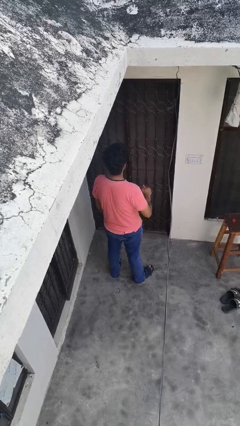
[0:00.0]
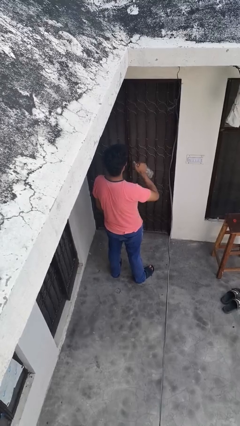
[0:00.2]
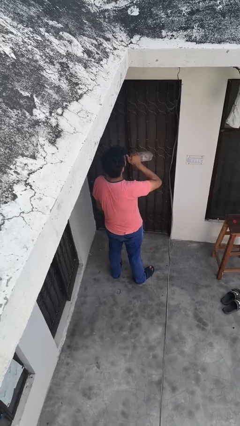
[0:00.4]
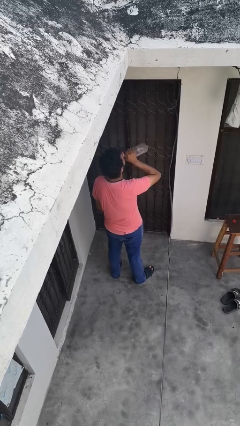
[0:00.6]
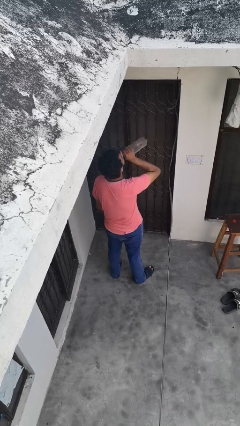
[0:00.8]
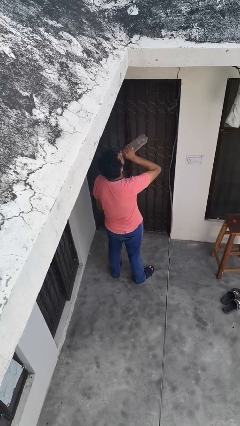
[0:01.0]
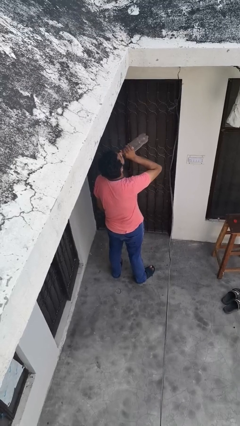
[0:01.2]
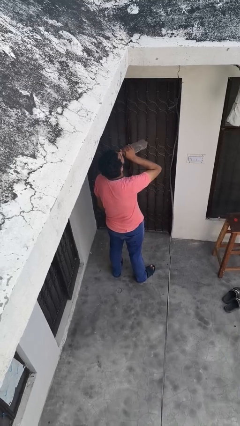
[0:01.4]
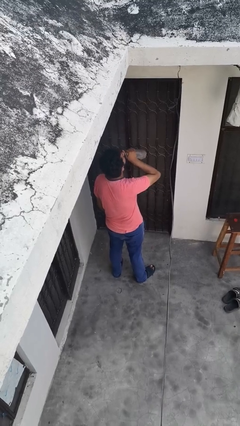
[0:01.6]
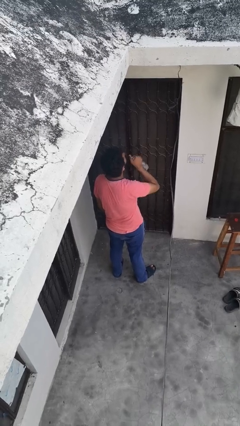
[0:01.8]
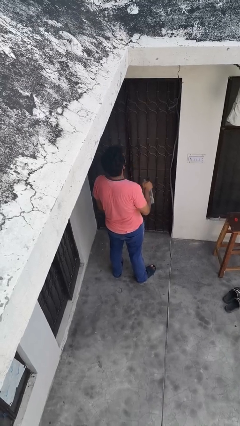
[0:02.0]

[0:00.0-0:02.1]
person drinks from bottle

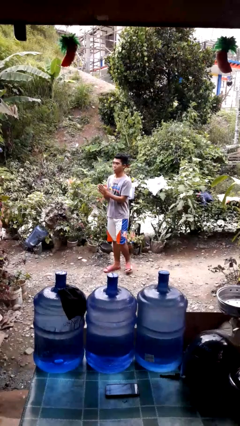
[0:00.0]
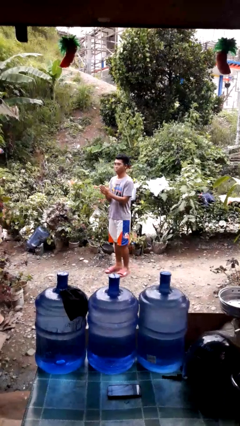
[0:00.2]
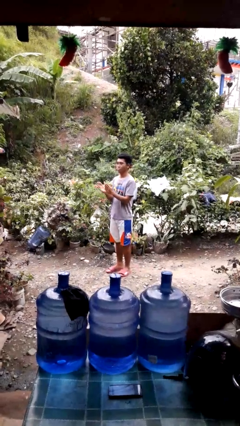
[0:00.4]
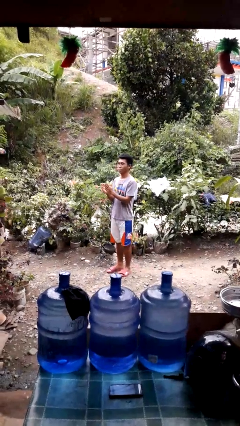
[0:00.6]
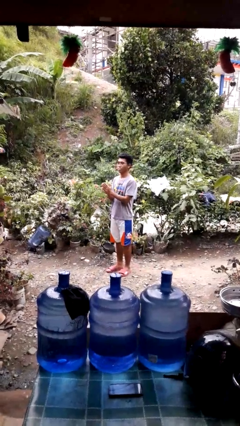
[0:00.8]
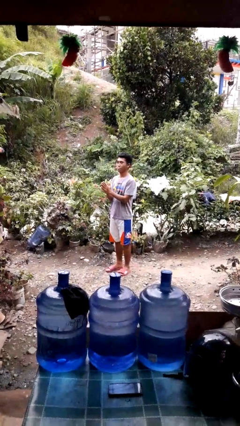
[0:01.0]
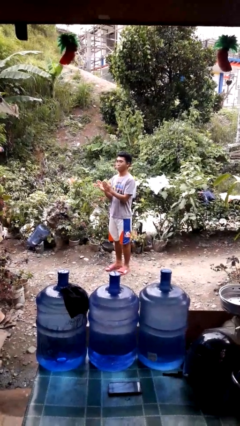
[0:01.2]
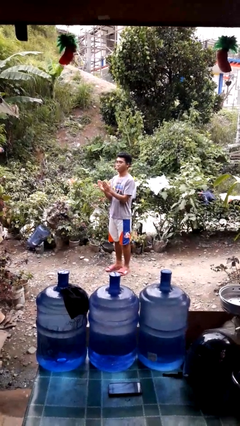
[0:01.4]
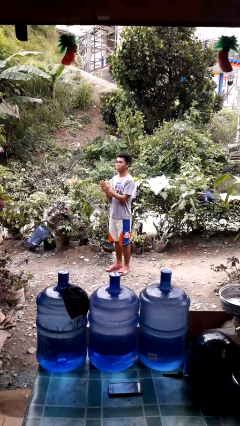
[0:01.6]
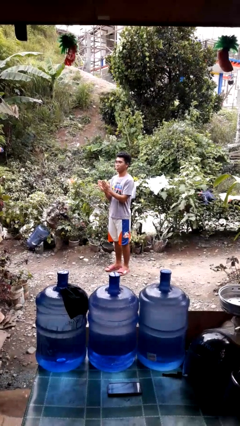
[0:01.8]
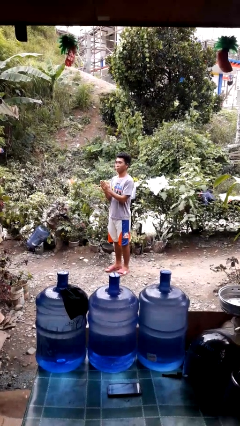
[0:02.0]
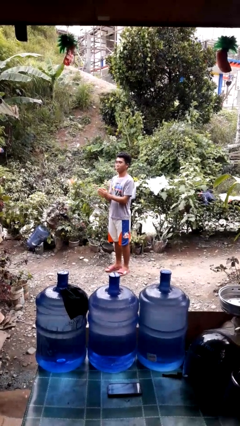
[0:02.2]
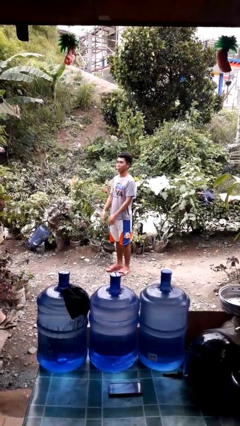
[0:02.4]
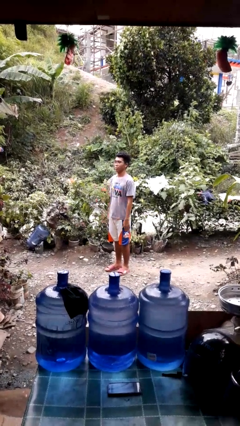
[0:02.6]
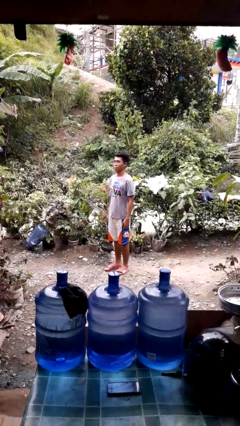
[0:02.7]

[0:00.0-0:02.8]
person claps hands

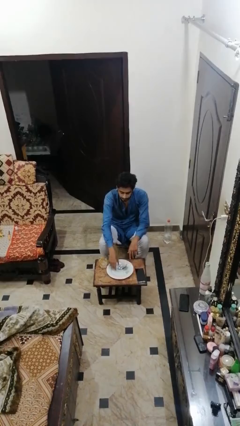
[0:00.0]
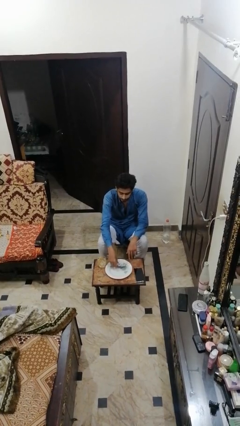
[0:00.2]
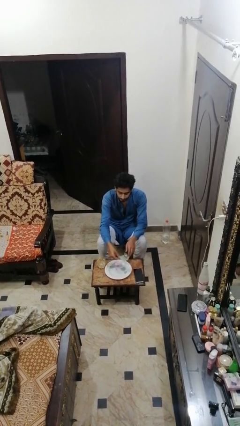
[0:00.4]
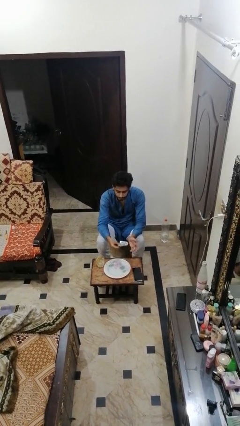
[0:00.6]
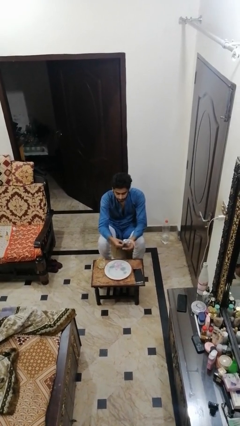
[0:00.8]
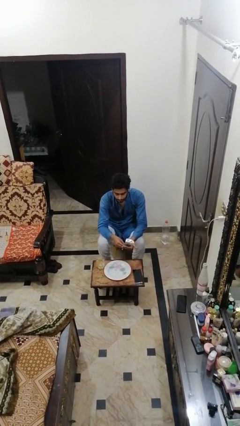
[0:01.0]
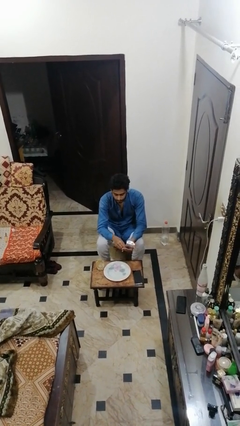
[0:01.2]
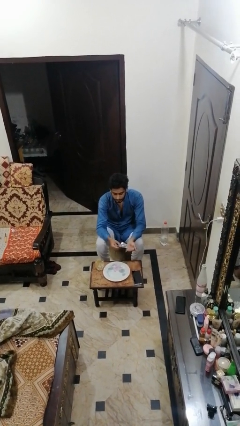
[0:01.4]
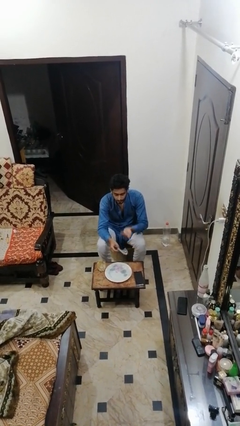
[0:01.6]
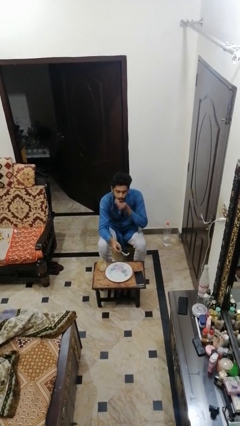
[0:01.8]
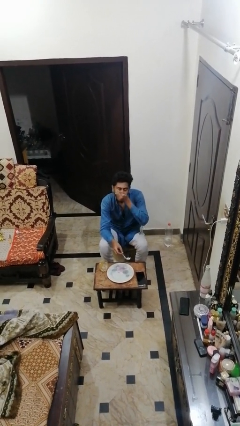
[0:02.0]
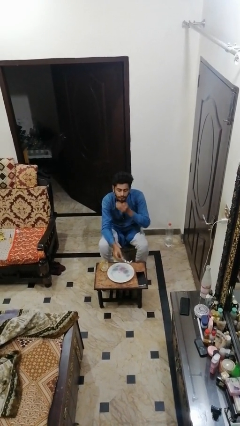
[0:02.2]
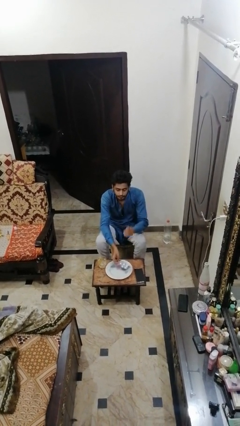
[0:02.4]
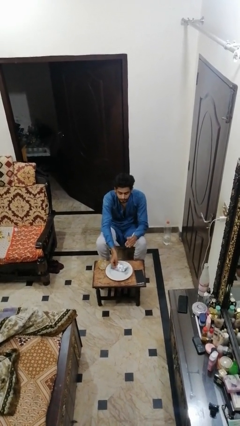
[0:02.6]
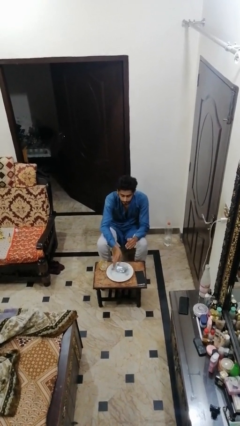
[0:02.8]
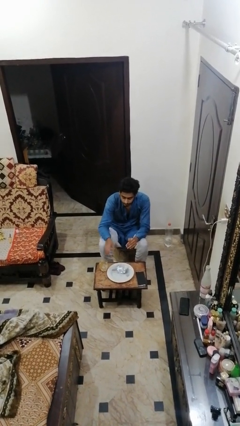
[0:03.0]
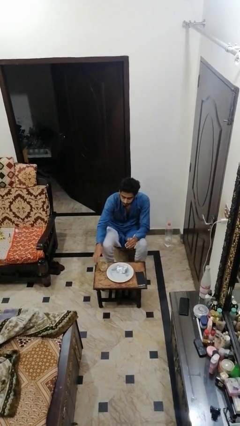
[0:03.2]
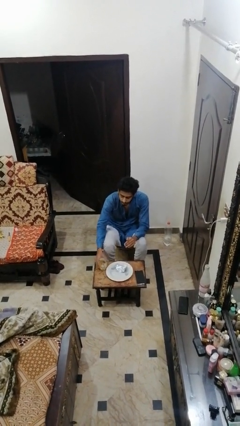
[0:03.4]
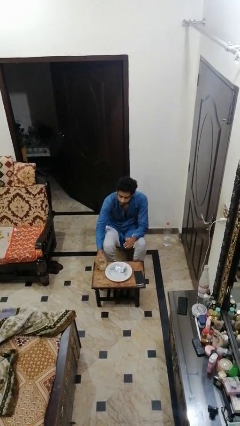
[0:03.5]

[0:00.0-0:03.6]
person takes medicine pills

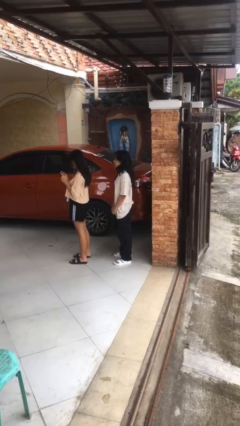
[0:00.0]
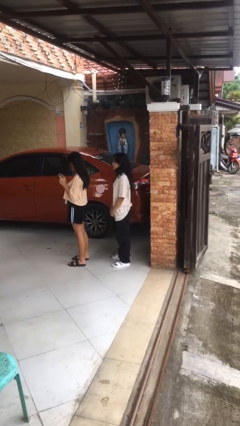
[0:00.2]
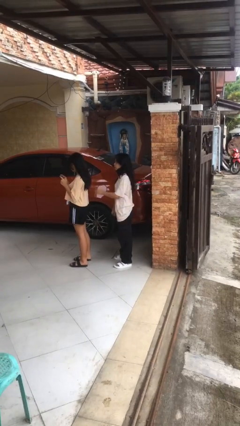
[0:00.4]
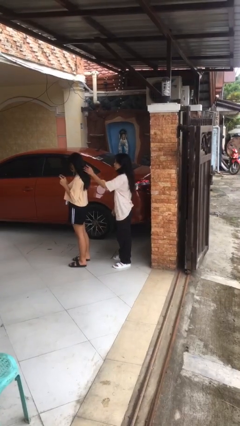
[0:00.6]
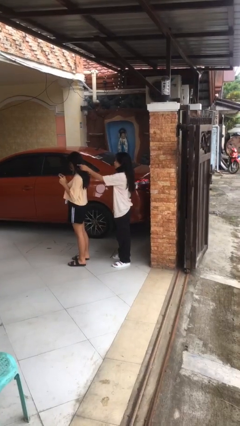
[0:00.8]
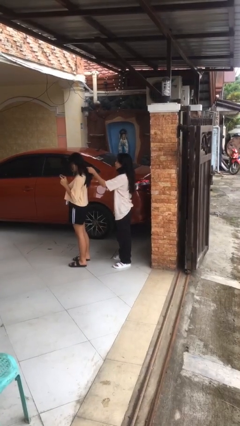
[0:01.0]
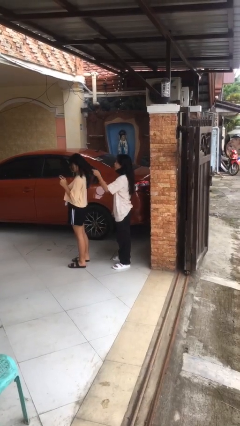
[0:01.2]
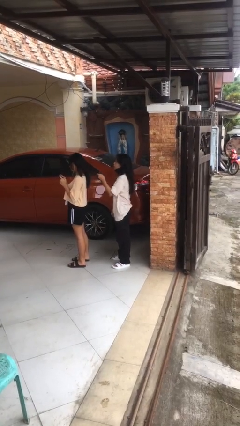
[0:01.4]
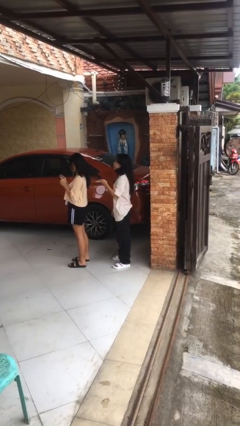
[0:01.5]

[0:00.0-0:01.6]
person grabs person by hair

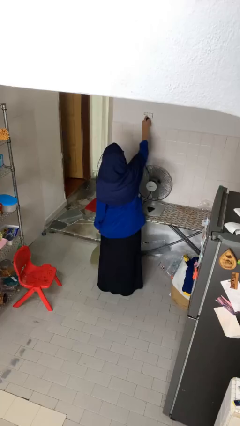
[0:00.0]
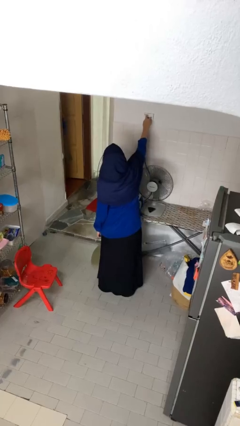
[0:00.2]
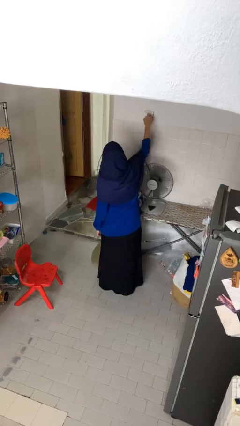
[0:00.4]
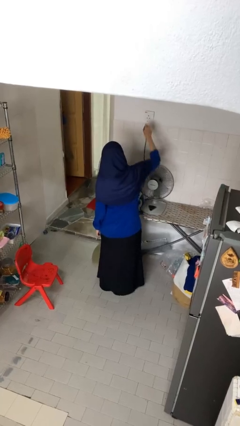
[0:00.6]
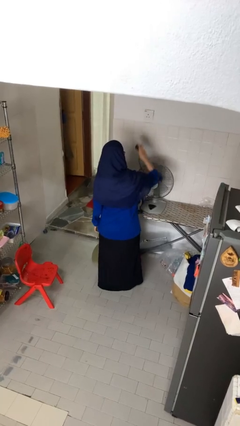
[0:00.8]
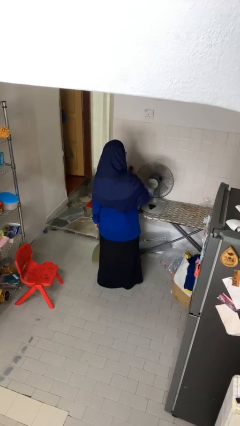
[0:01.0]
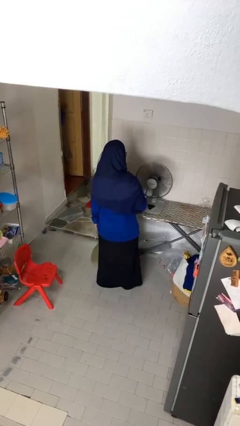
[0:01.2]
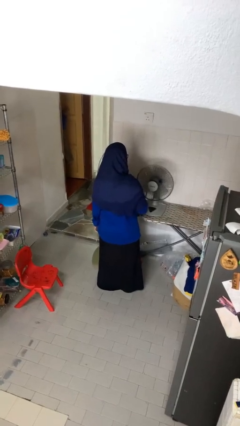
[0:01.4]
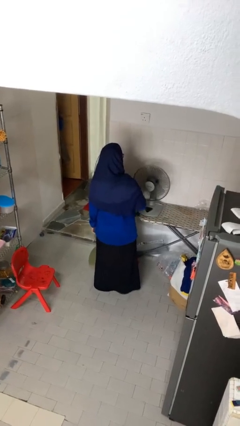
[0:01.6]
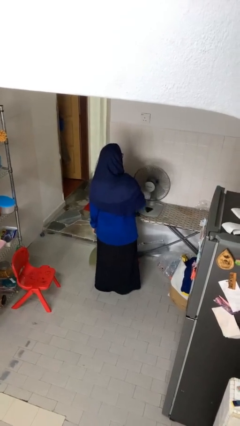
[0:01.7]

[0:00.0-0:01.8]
person unplugs from electrical socket

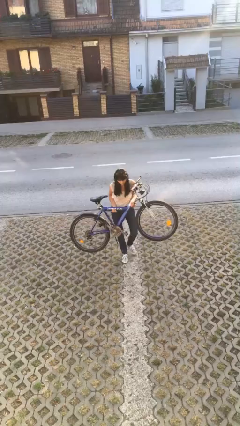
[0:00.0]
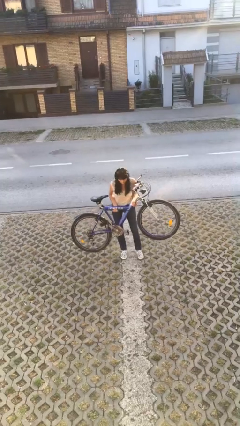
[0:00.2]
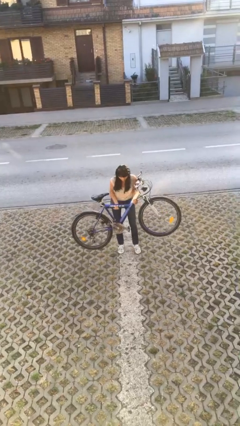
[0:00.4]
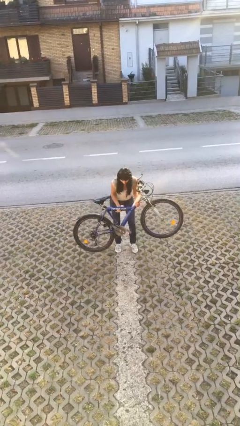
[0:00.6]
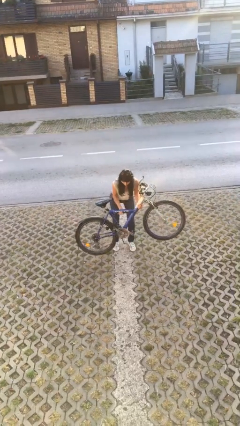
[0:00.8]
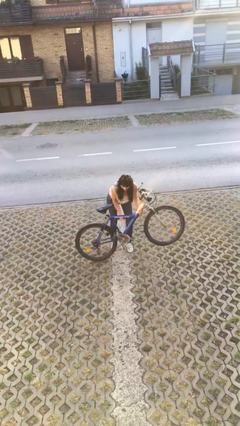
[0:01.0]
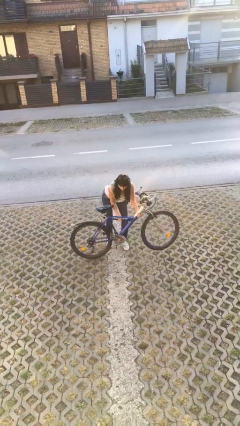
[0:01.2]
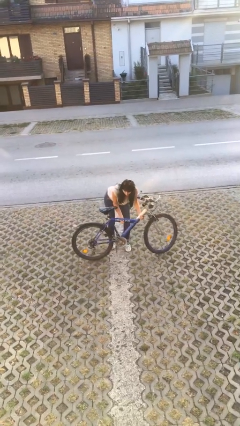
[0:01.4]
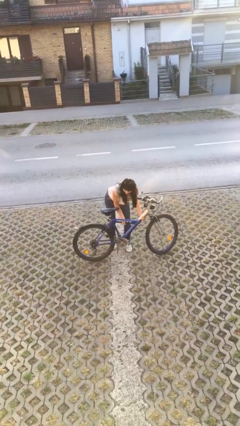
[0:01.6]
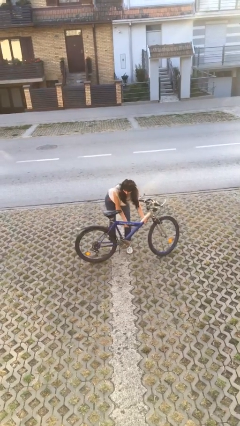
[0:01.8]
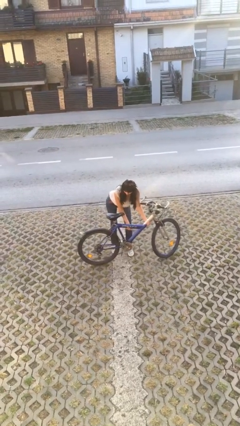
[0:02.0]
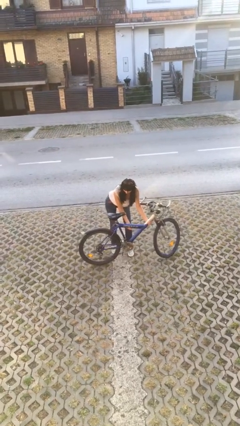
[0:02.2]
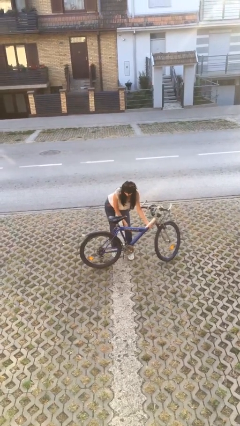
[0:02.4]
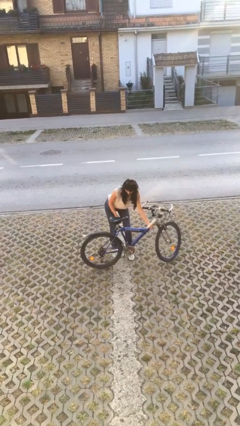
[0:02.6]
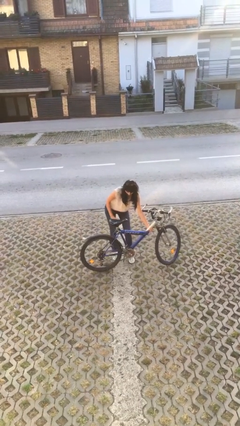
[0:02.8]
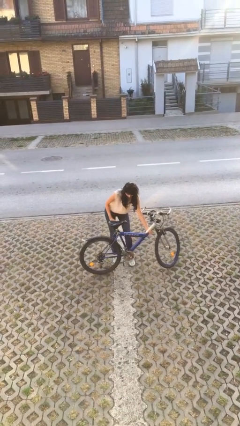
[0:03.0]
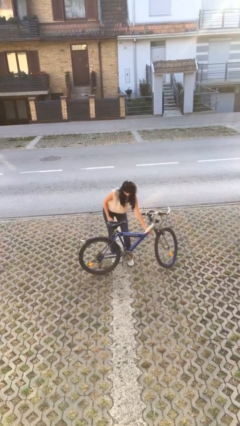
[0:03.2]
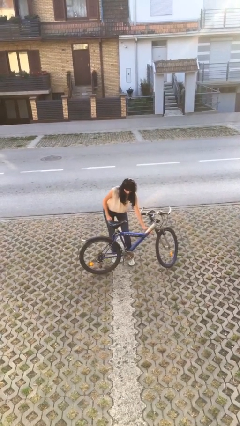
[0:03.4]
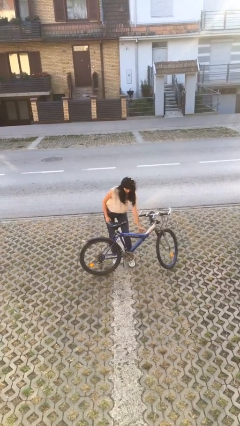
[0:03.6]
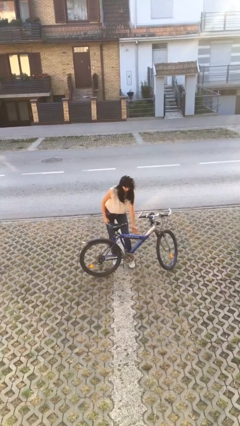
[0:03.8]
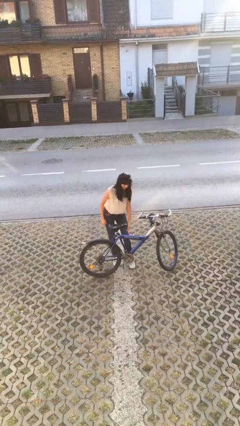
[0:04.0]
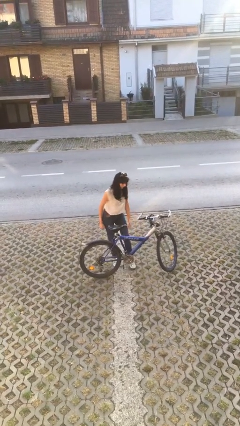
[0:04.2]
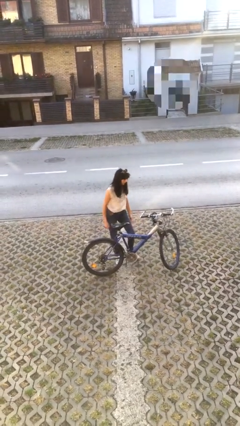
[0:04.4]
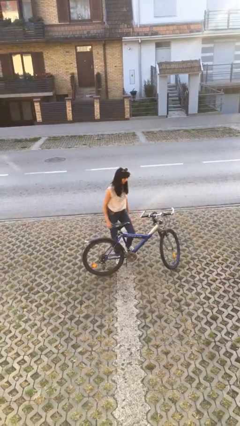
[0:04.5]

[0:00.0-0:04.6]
person puts down object on floor

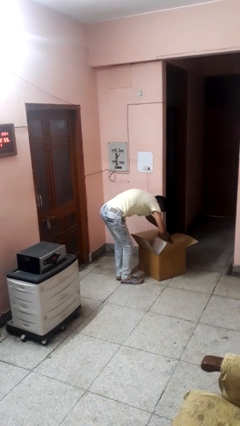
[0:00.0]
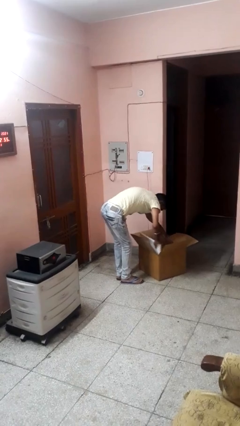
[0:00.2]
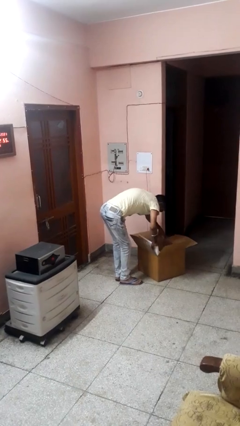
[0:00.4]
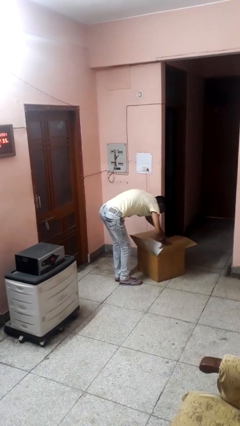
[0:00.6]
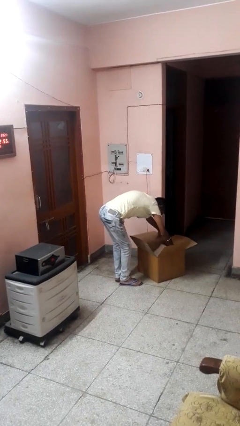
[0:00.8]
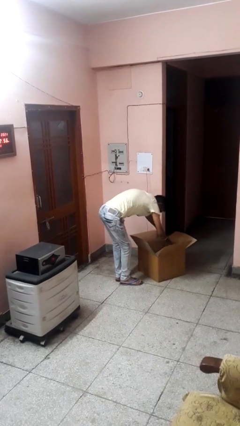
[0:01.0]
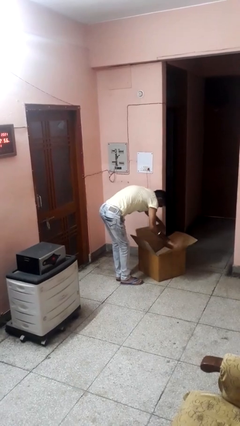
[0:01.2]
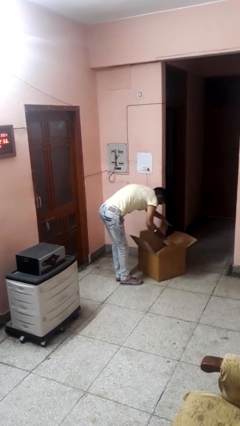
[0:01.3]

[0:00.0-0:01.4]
person searches in box
